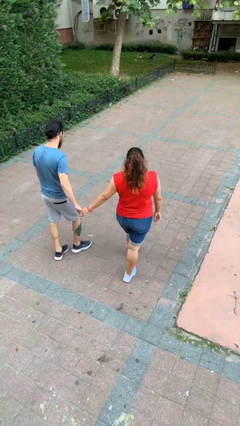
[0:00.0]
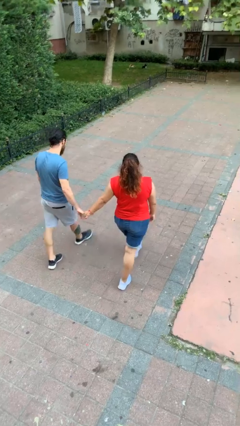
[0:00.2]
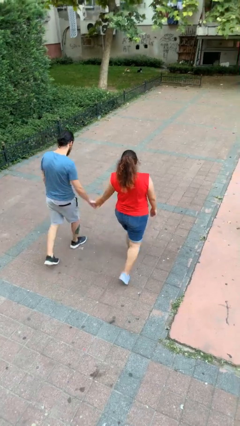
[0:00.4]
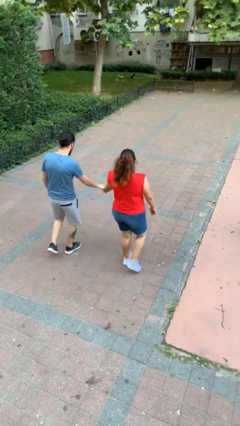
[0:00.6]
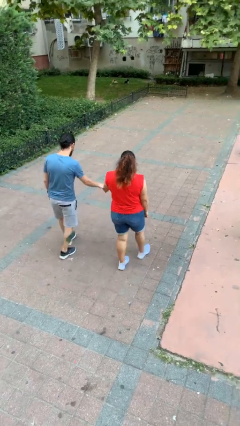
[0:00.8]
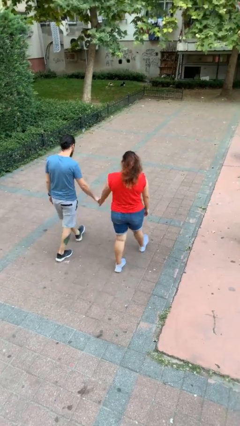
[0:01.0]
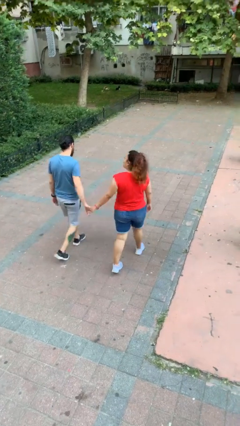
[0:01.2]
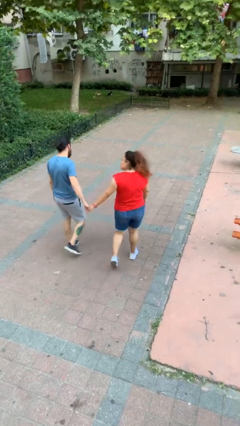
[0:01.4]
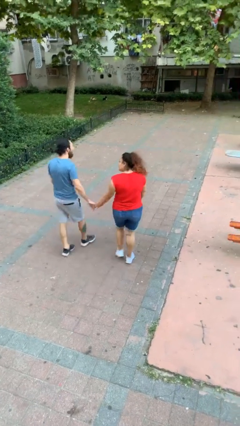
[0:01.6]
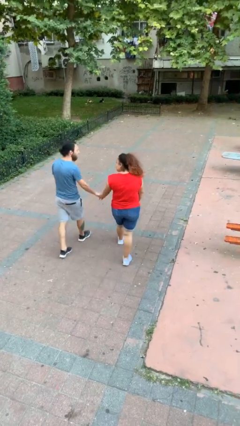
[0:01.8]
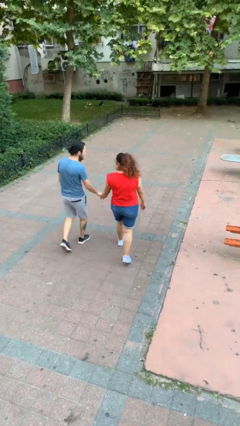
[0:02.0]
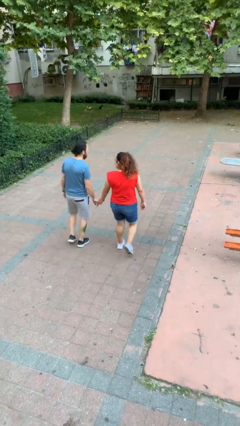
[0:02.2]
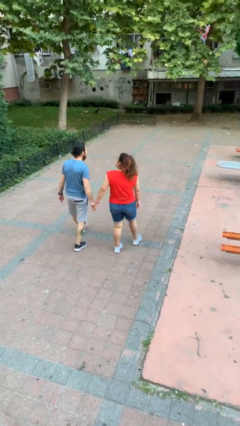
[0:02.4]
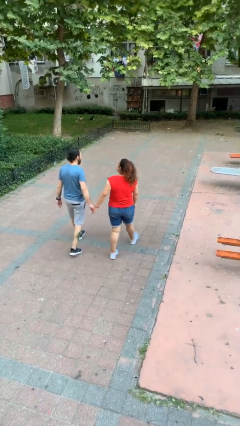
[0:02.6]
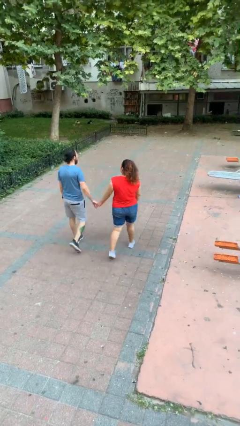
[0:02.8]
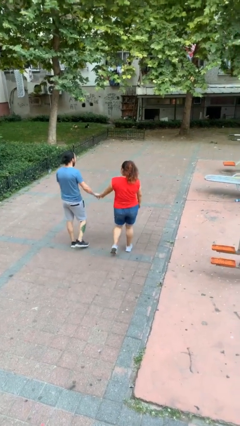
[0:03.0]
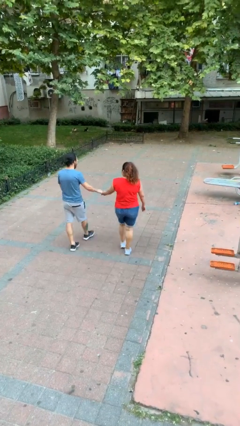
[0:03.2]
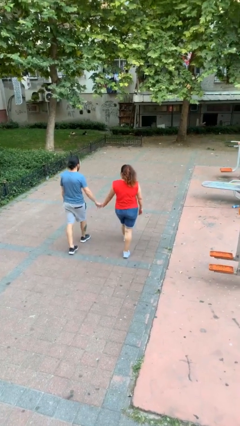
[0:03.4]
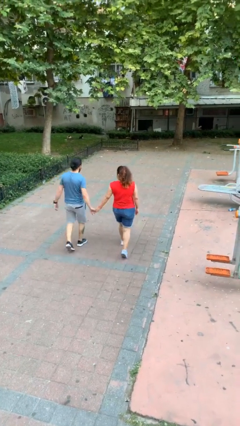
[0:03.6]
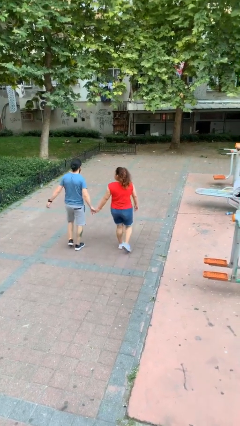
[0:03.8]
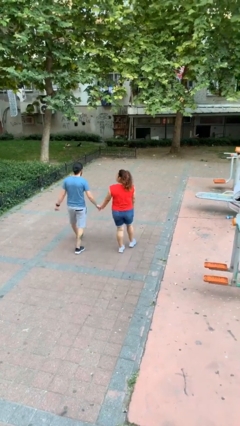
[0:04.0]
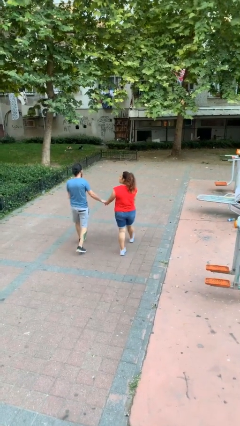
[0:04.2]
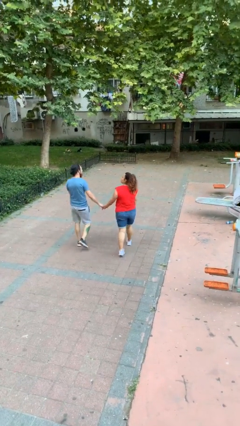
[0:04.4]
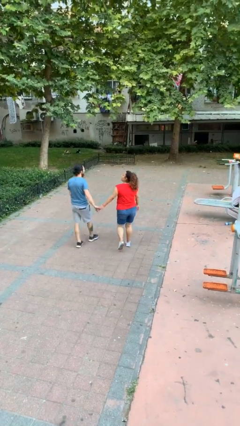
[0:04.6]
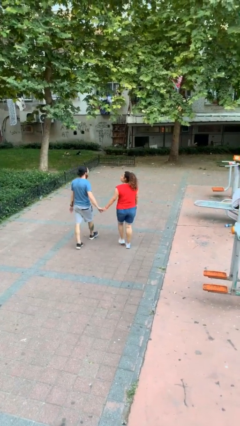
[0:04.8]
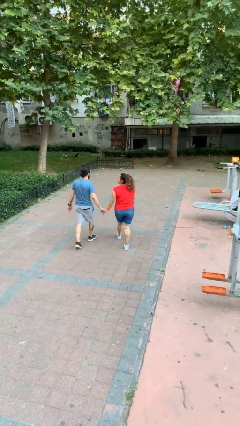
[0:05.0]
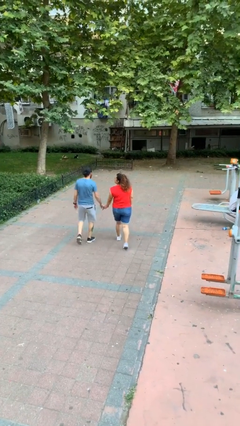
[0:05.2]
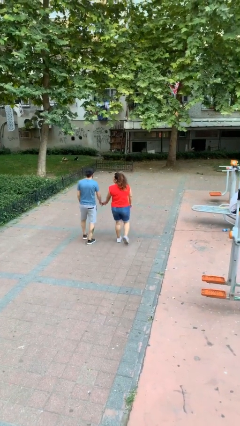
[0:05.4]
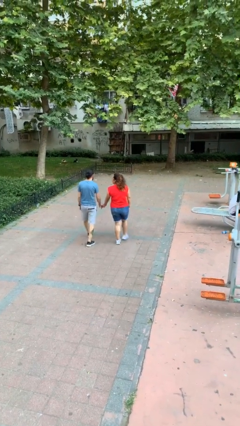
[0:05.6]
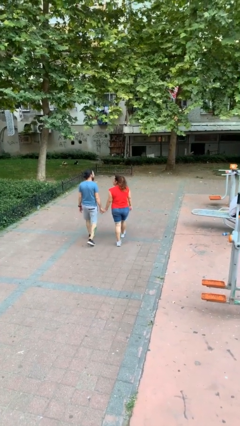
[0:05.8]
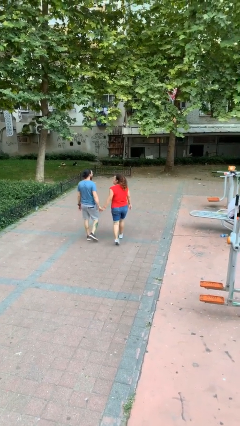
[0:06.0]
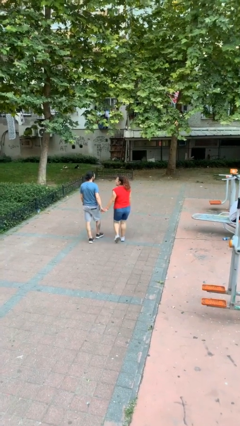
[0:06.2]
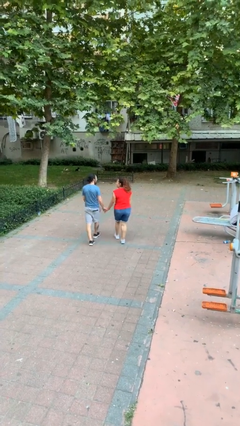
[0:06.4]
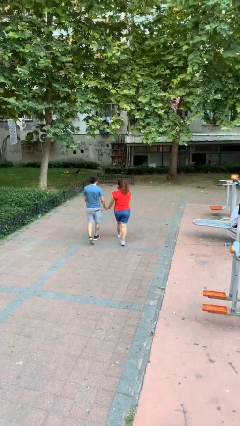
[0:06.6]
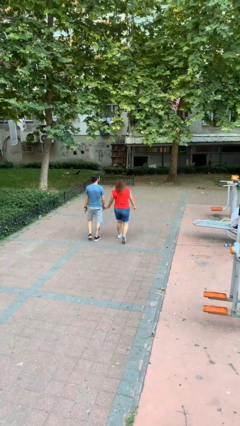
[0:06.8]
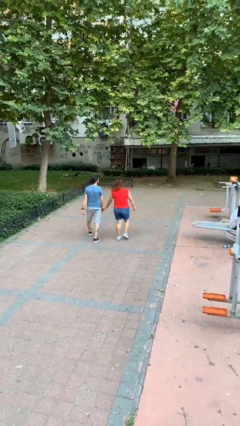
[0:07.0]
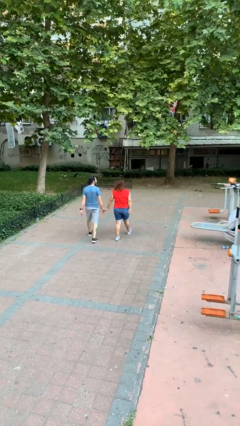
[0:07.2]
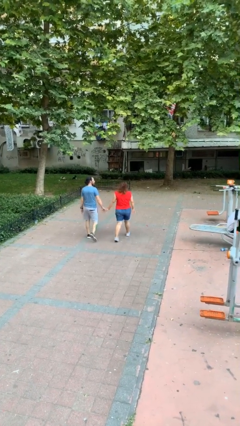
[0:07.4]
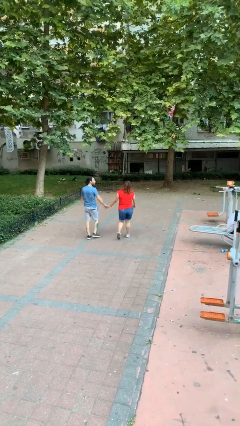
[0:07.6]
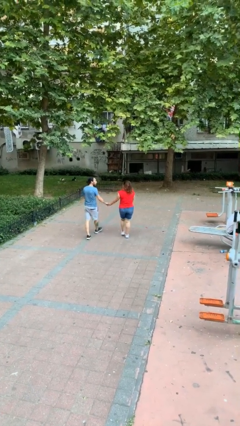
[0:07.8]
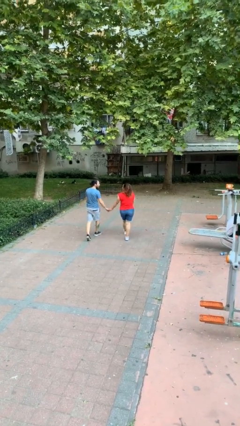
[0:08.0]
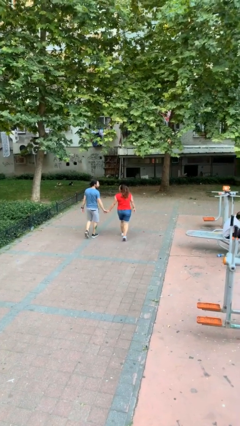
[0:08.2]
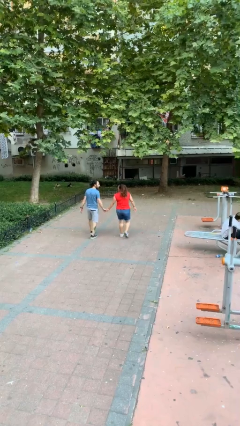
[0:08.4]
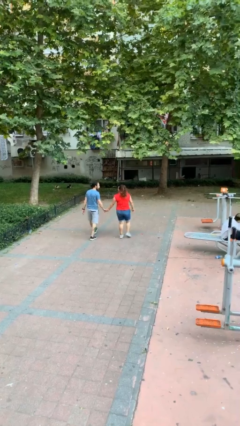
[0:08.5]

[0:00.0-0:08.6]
person holds hand

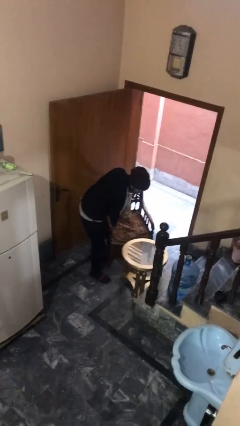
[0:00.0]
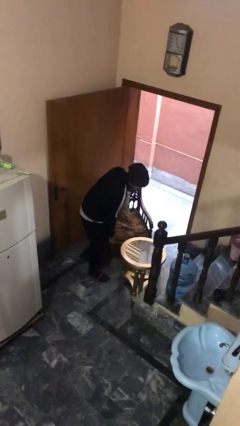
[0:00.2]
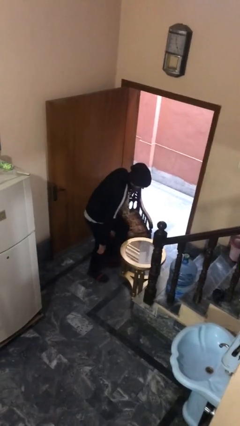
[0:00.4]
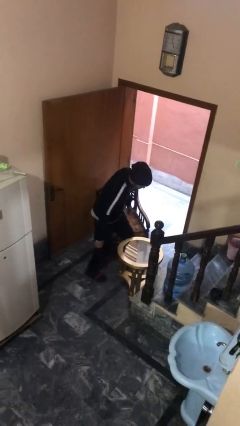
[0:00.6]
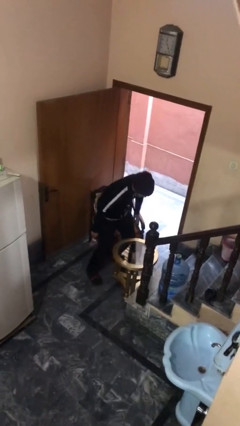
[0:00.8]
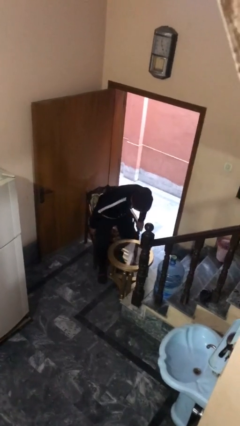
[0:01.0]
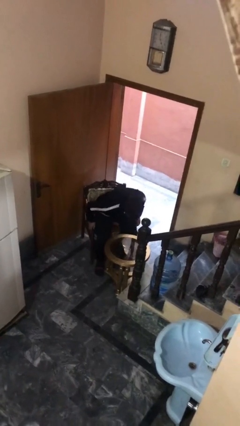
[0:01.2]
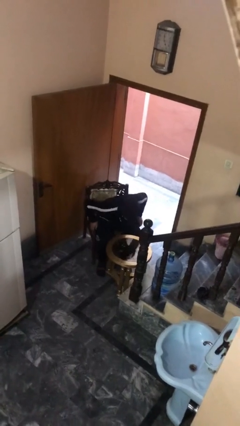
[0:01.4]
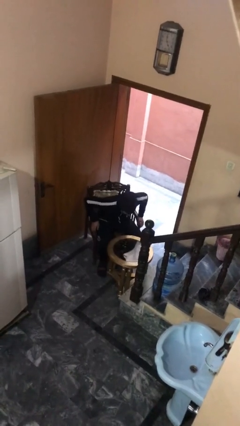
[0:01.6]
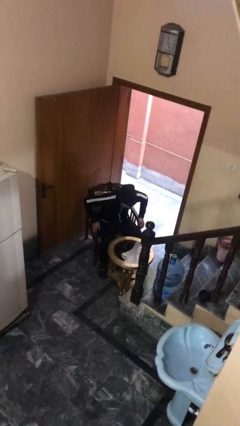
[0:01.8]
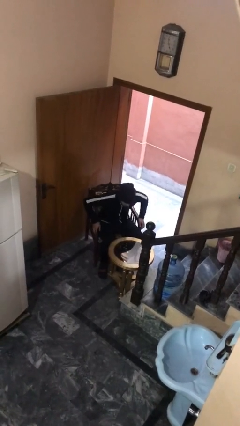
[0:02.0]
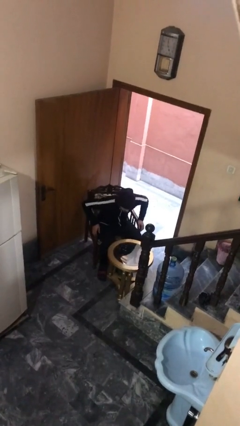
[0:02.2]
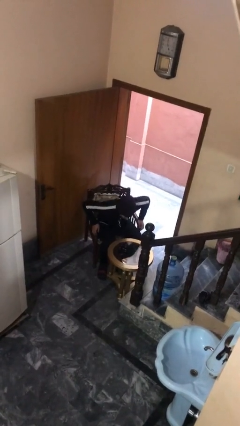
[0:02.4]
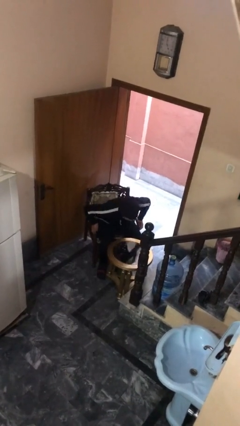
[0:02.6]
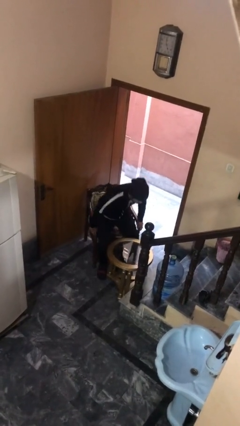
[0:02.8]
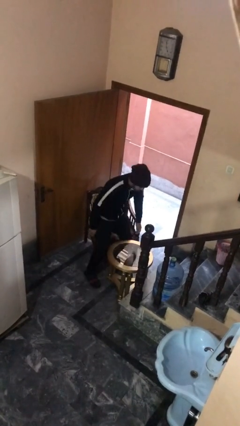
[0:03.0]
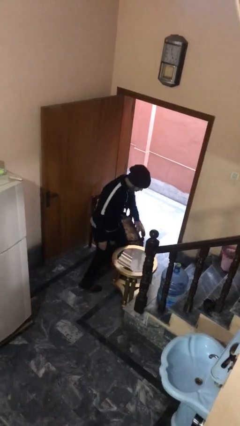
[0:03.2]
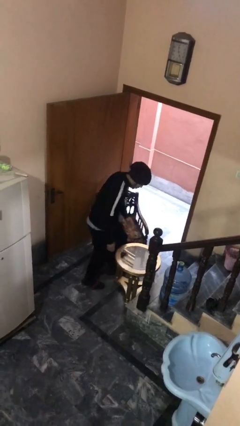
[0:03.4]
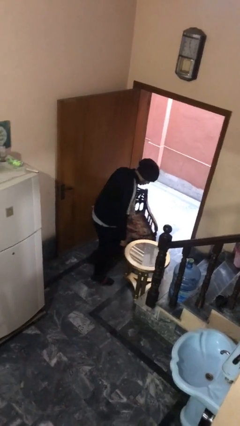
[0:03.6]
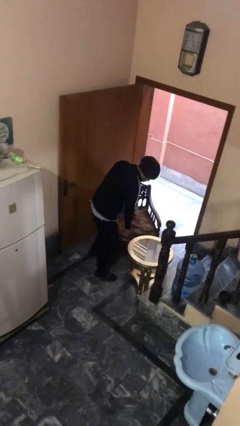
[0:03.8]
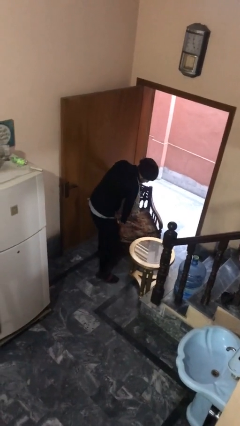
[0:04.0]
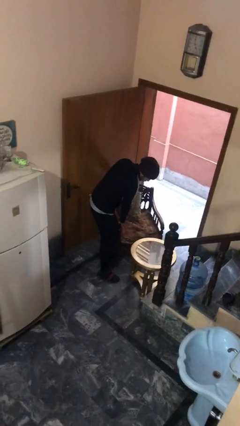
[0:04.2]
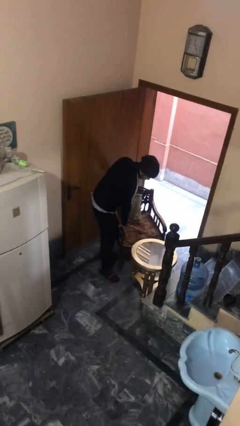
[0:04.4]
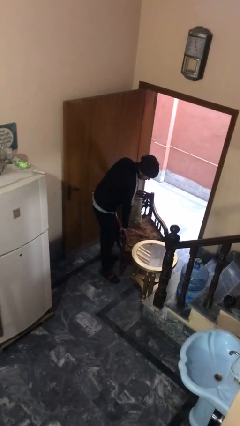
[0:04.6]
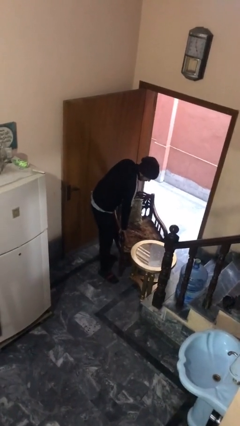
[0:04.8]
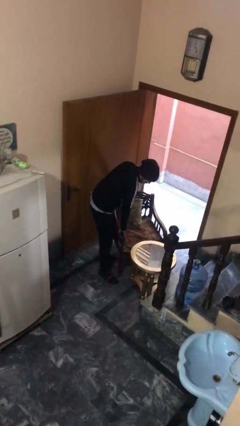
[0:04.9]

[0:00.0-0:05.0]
person sits down

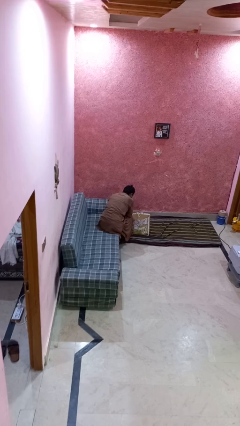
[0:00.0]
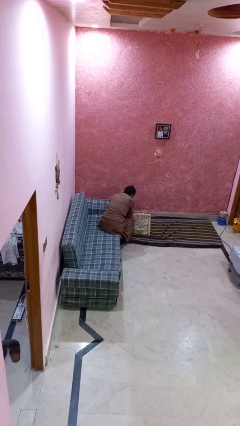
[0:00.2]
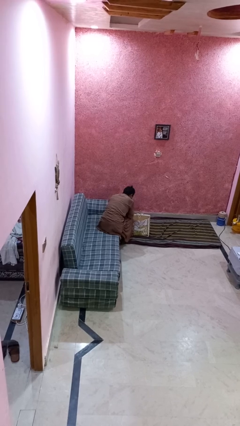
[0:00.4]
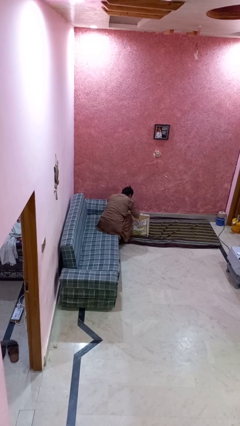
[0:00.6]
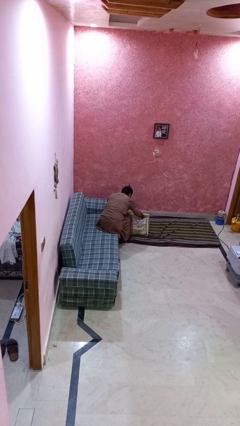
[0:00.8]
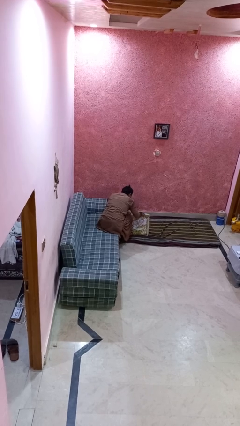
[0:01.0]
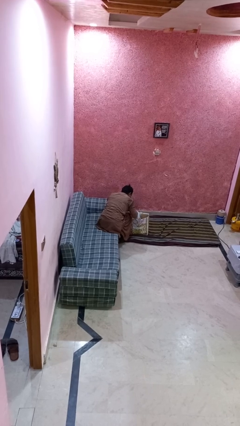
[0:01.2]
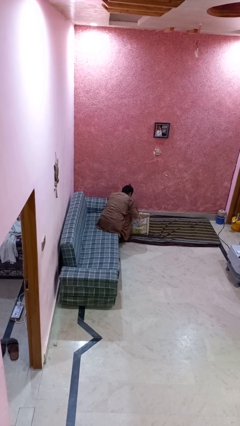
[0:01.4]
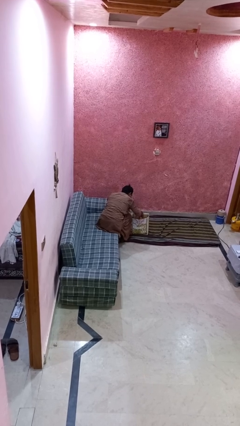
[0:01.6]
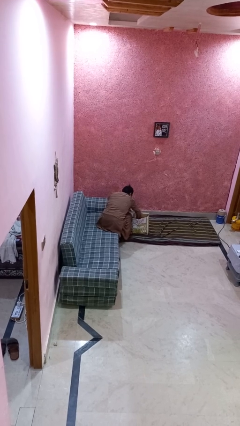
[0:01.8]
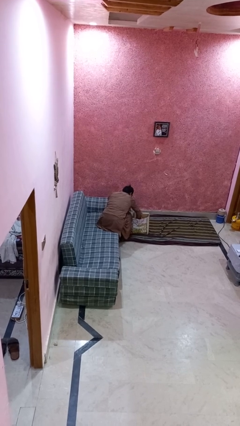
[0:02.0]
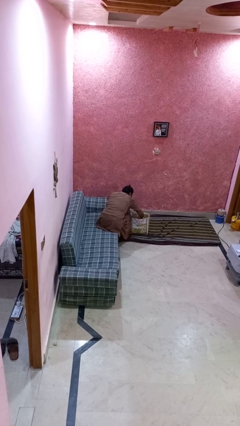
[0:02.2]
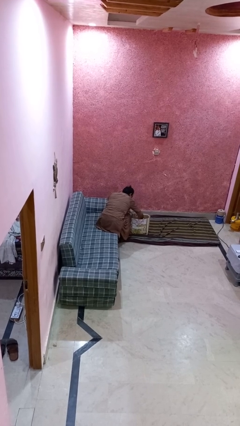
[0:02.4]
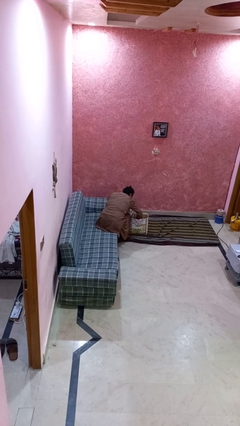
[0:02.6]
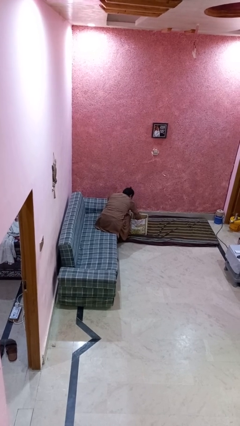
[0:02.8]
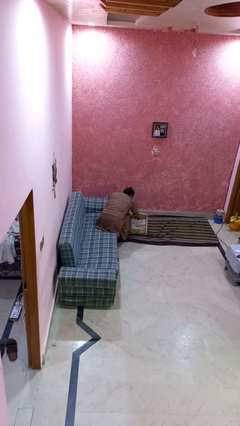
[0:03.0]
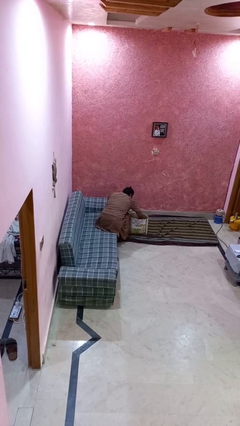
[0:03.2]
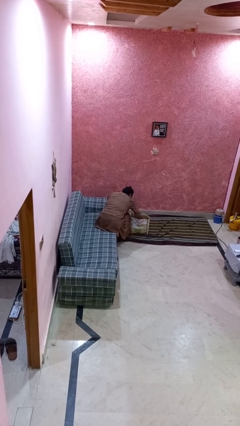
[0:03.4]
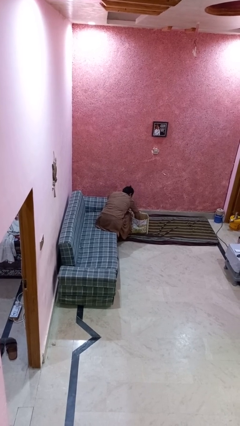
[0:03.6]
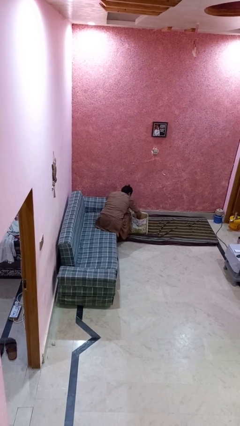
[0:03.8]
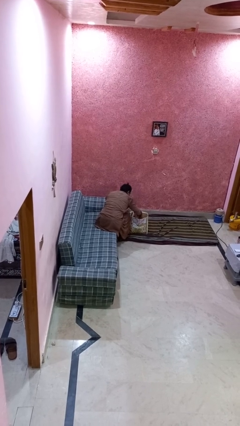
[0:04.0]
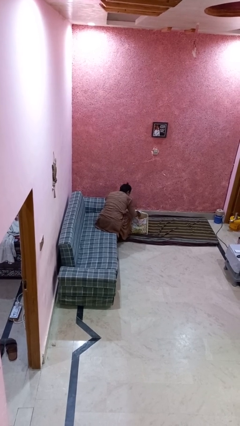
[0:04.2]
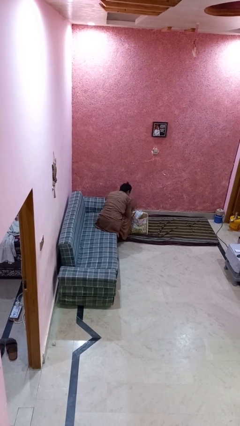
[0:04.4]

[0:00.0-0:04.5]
person searches in bag
